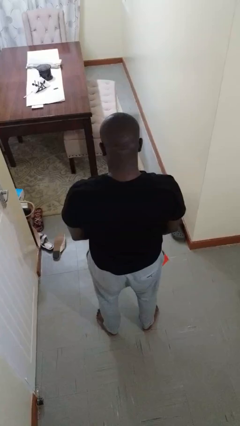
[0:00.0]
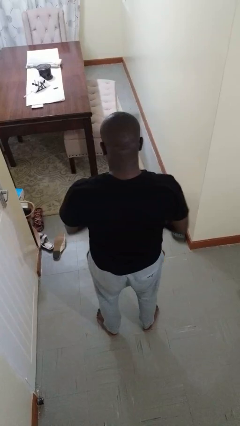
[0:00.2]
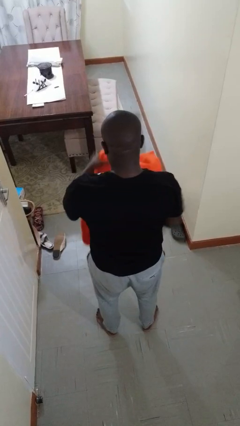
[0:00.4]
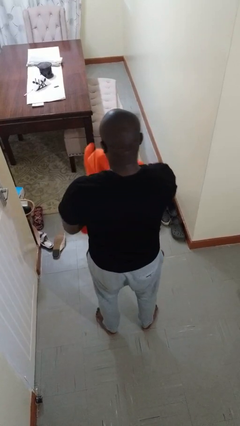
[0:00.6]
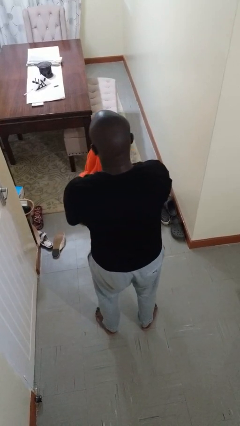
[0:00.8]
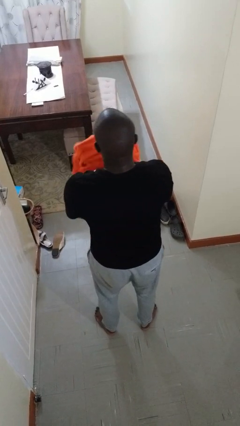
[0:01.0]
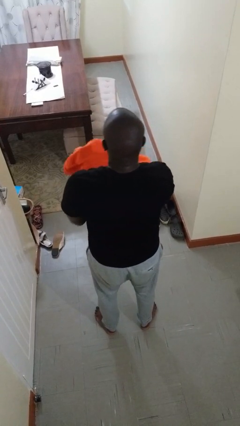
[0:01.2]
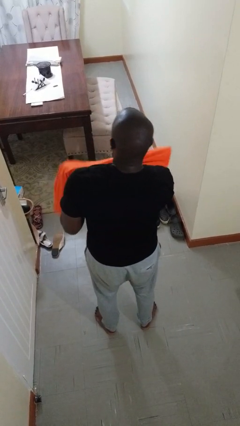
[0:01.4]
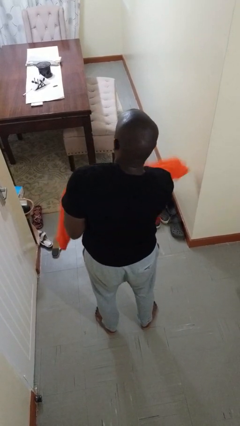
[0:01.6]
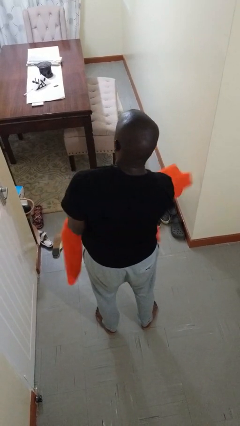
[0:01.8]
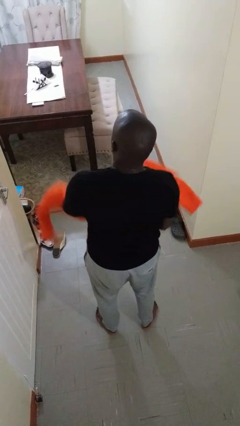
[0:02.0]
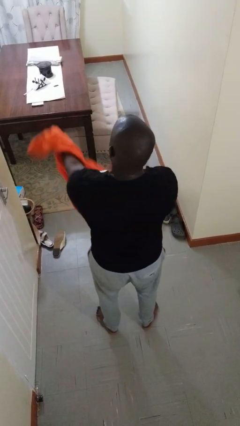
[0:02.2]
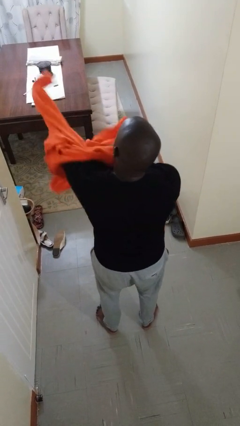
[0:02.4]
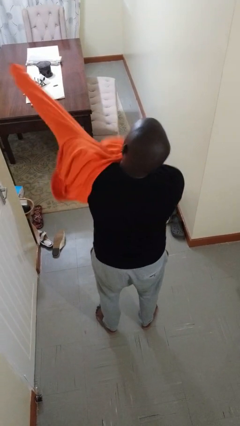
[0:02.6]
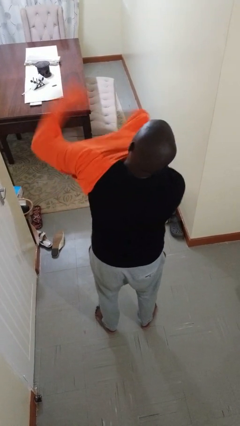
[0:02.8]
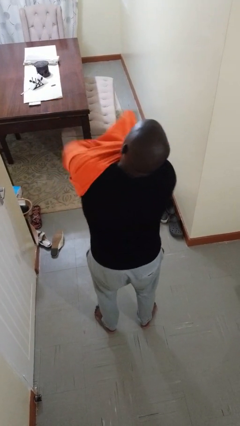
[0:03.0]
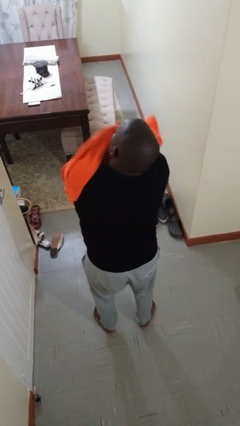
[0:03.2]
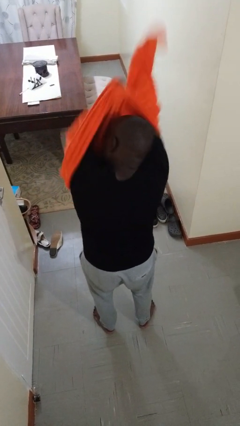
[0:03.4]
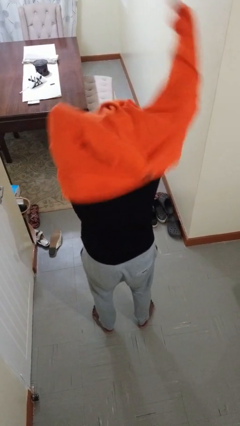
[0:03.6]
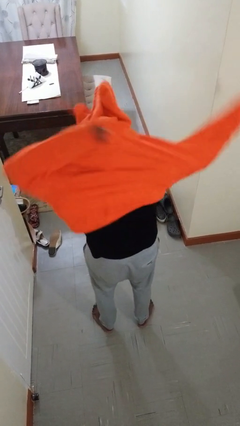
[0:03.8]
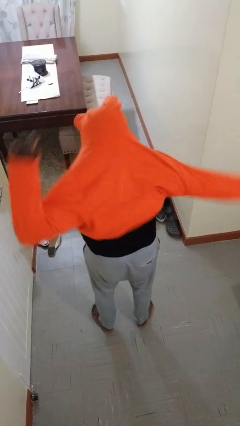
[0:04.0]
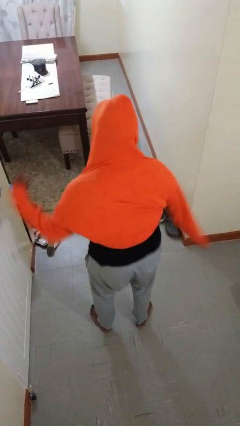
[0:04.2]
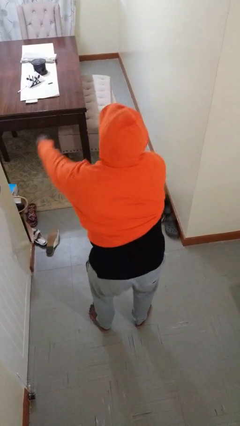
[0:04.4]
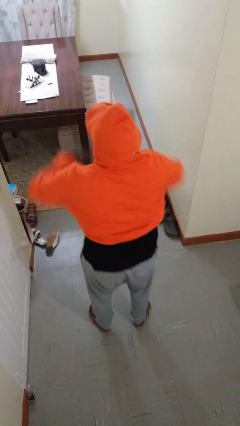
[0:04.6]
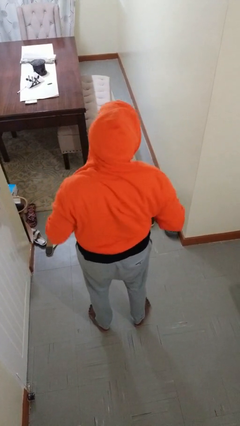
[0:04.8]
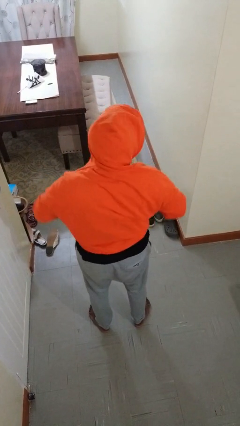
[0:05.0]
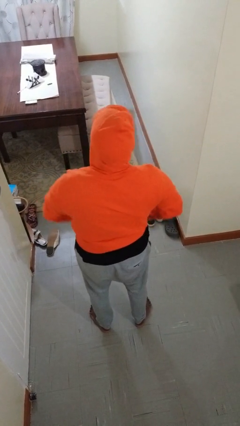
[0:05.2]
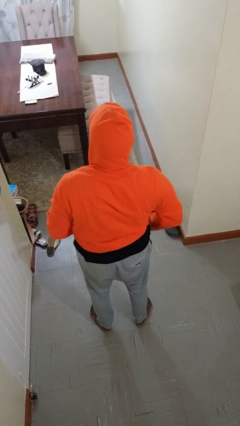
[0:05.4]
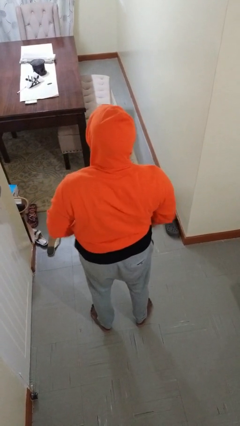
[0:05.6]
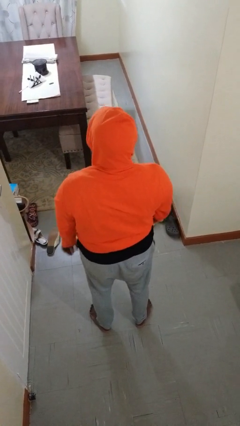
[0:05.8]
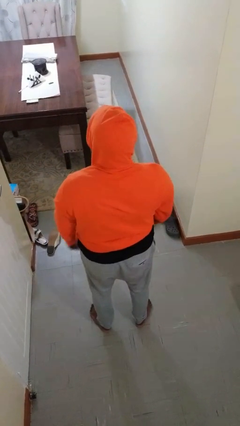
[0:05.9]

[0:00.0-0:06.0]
person puts on hoodie

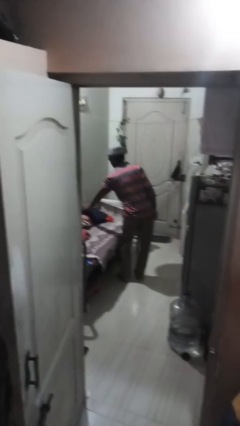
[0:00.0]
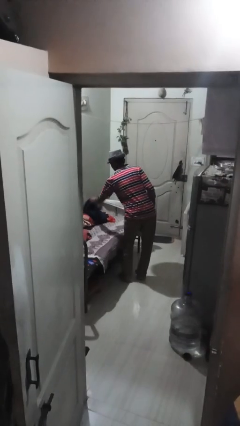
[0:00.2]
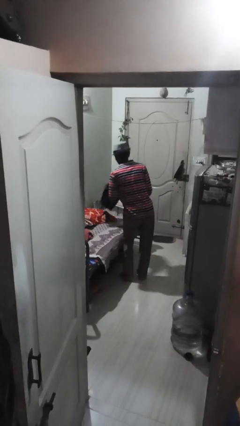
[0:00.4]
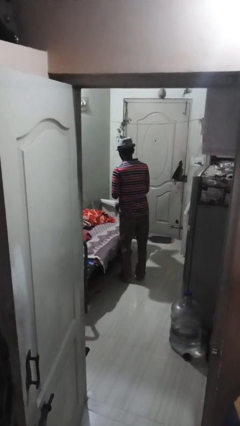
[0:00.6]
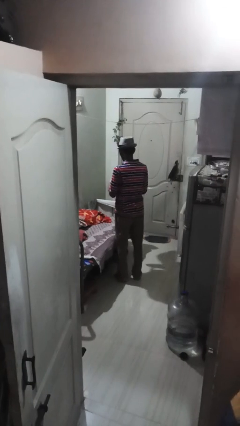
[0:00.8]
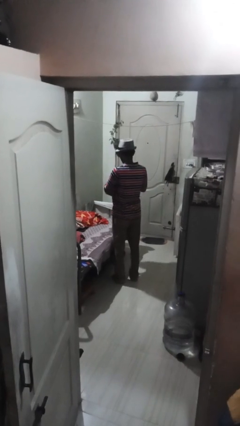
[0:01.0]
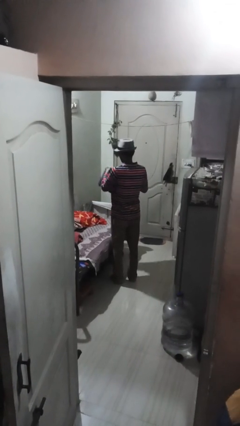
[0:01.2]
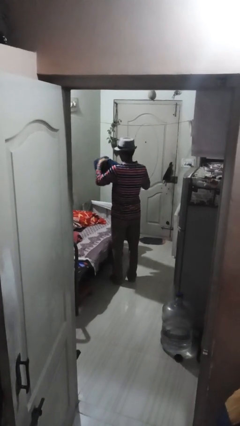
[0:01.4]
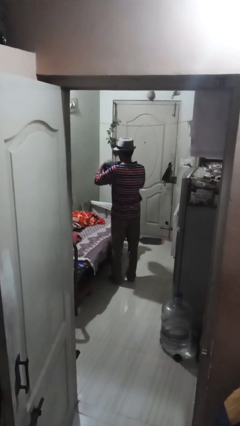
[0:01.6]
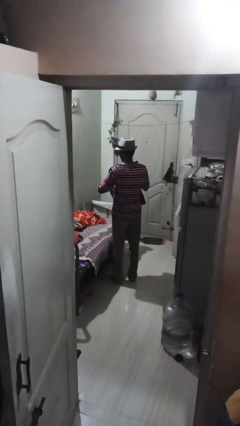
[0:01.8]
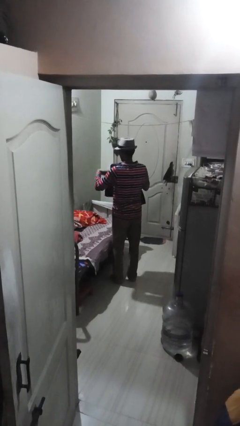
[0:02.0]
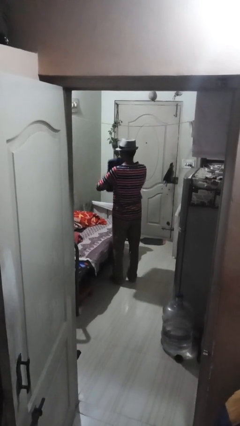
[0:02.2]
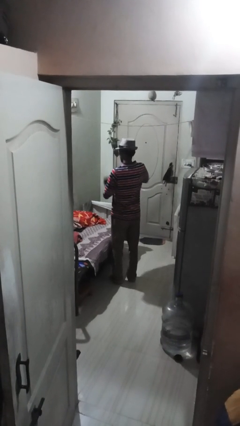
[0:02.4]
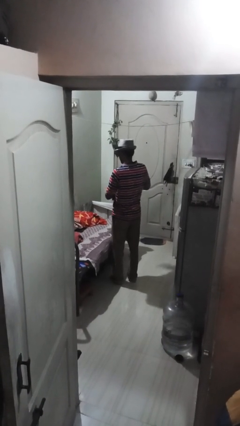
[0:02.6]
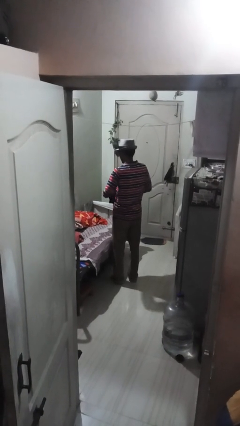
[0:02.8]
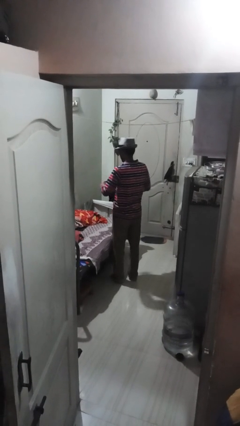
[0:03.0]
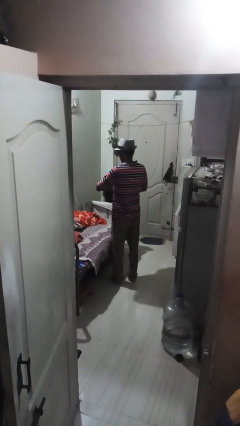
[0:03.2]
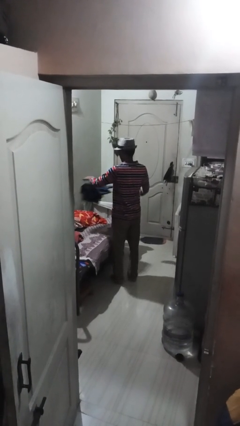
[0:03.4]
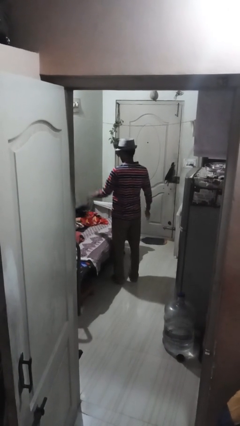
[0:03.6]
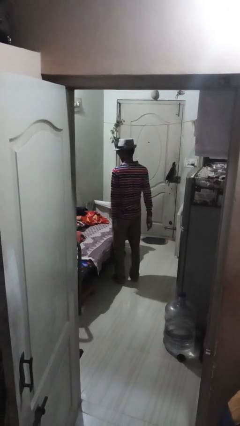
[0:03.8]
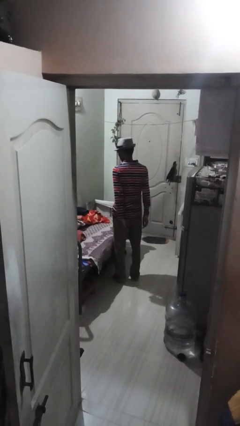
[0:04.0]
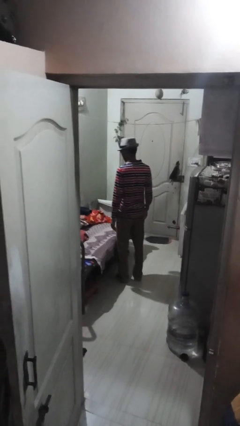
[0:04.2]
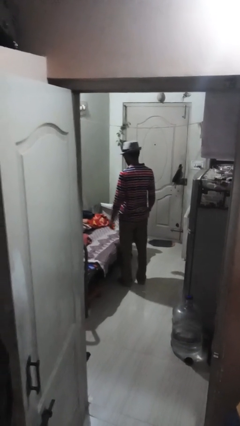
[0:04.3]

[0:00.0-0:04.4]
person folds pants

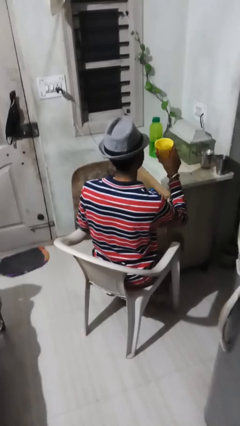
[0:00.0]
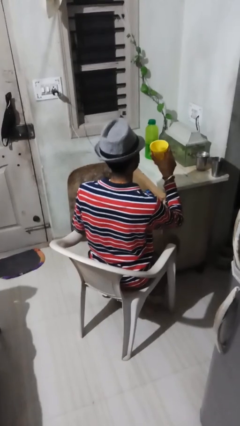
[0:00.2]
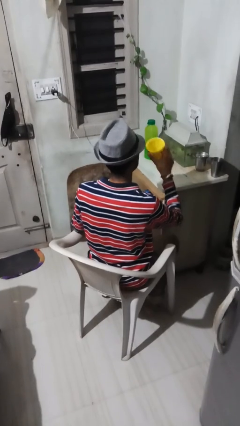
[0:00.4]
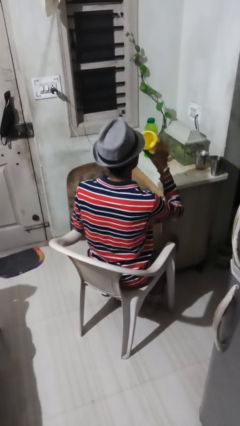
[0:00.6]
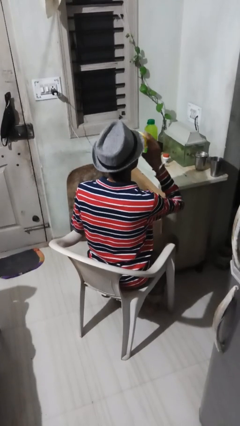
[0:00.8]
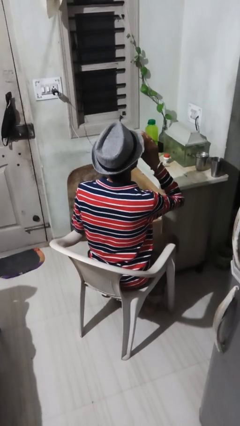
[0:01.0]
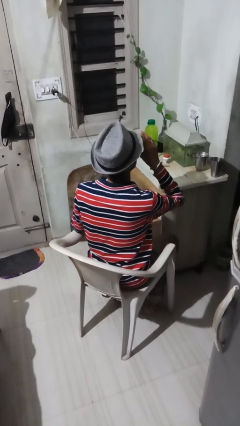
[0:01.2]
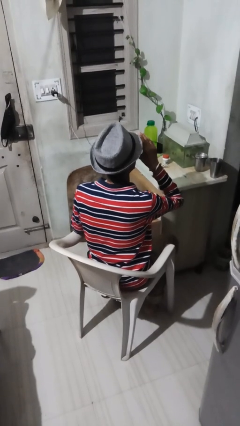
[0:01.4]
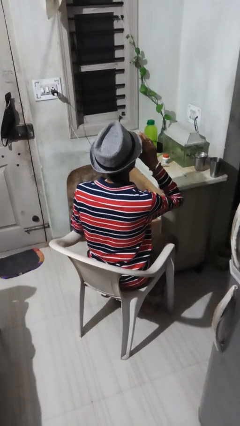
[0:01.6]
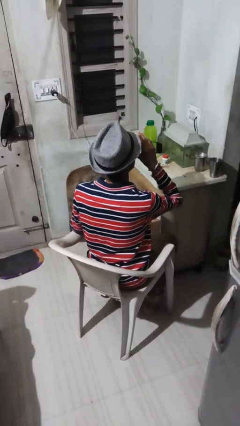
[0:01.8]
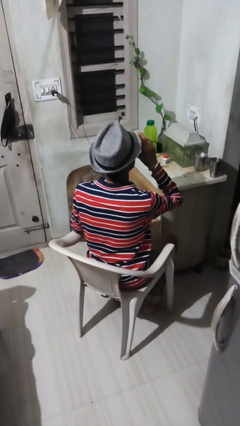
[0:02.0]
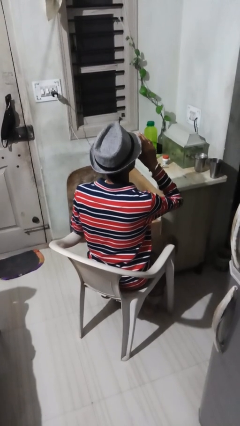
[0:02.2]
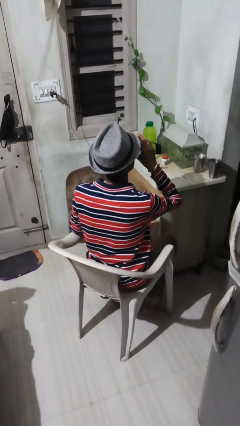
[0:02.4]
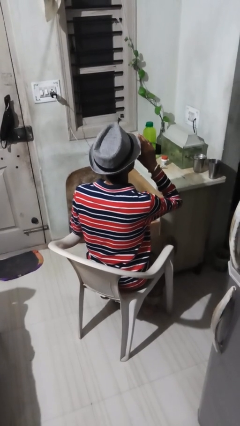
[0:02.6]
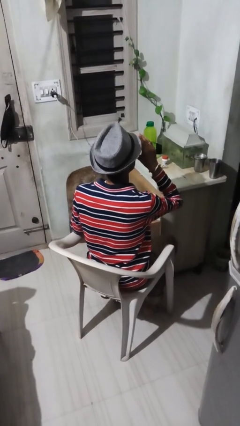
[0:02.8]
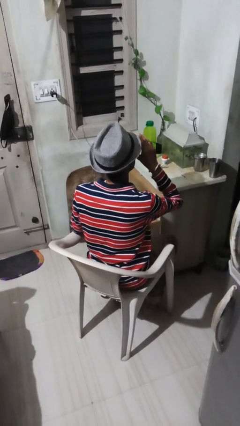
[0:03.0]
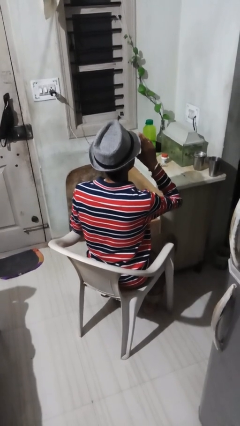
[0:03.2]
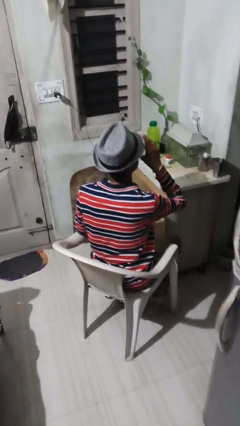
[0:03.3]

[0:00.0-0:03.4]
person drinks from mug

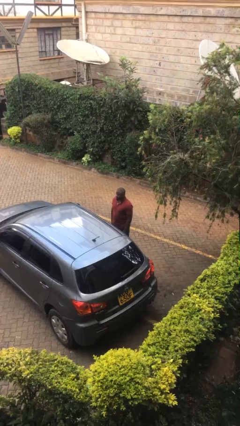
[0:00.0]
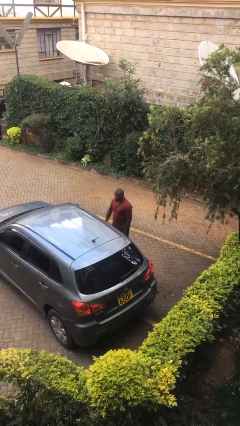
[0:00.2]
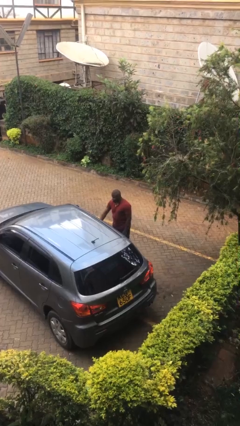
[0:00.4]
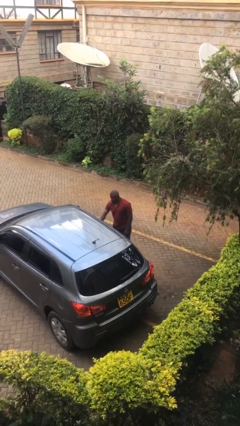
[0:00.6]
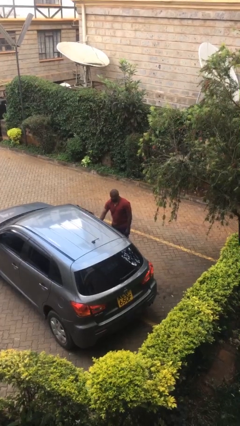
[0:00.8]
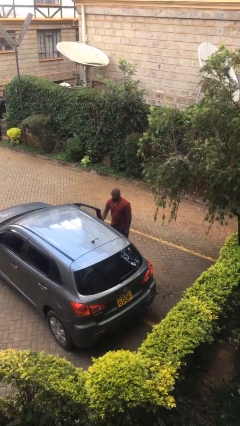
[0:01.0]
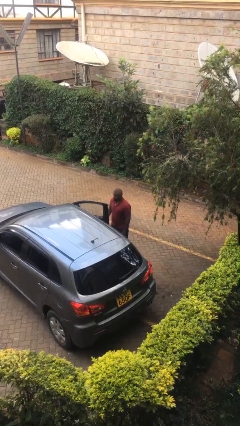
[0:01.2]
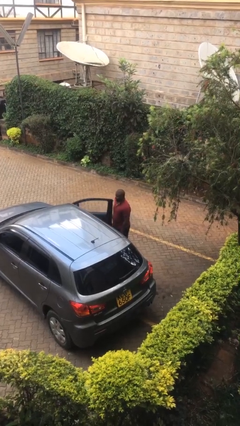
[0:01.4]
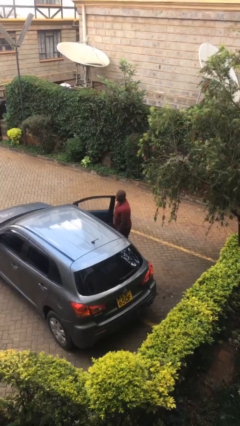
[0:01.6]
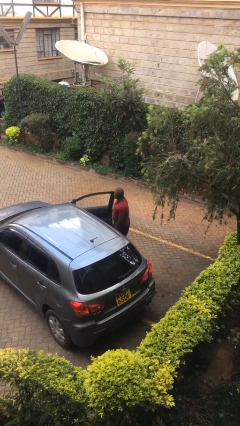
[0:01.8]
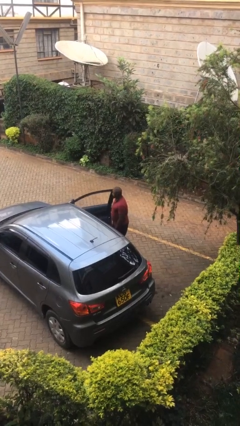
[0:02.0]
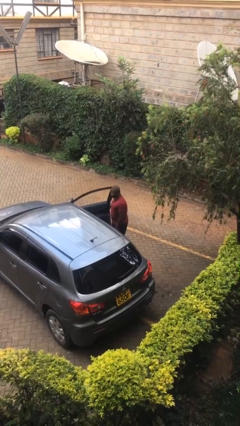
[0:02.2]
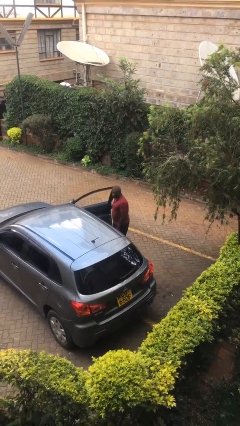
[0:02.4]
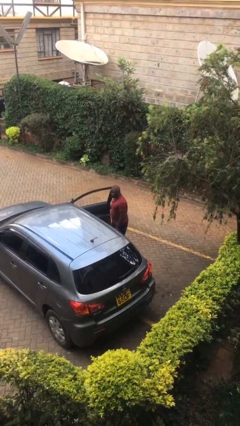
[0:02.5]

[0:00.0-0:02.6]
person opens car door

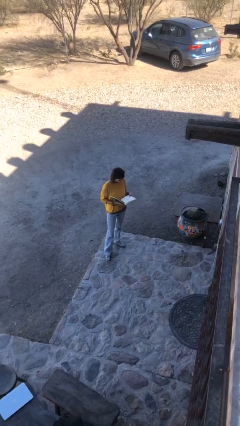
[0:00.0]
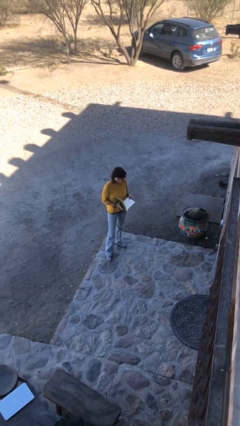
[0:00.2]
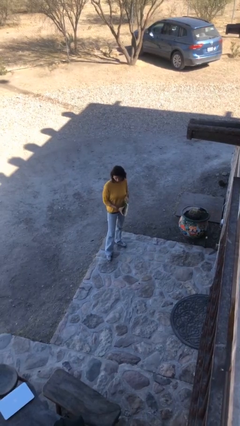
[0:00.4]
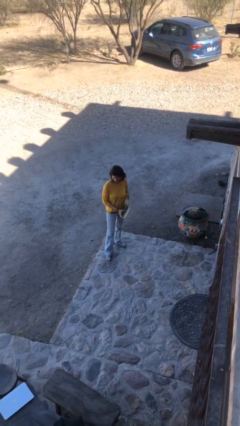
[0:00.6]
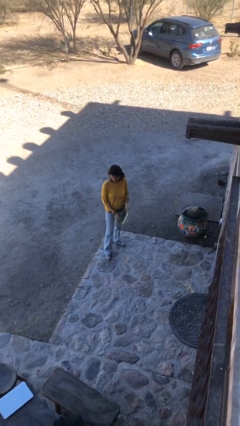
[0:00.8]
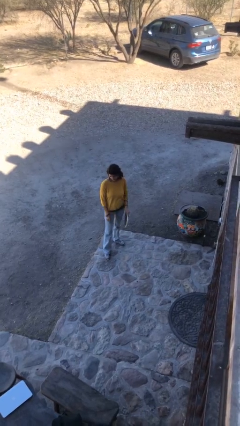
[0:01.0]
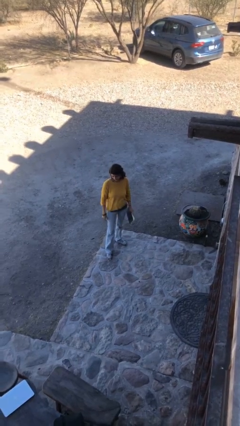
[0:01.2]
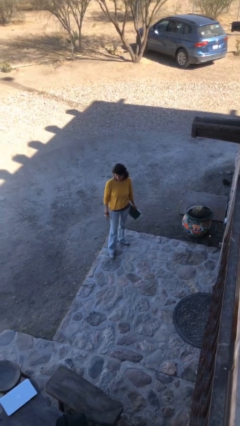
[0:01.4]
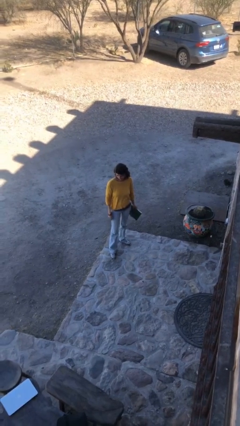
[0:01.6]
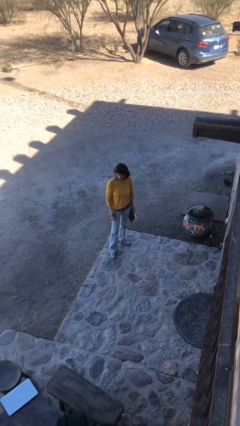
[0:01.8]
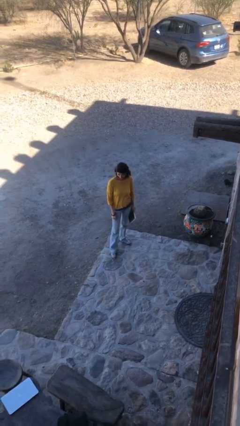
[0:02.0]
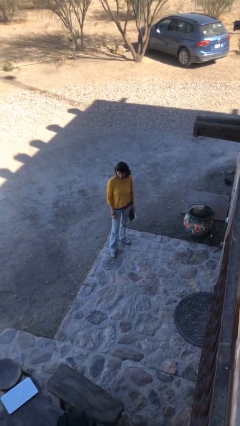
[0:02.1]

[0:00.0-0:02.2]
person reads document
